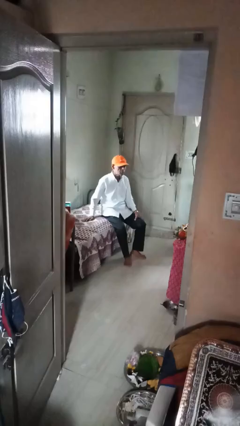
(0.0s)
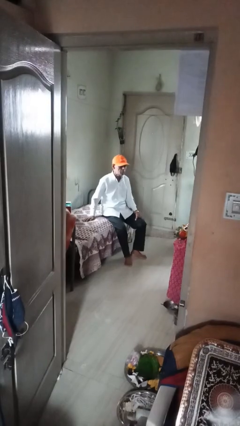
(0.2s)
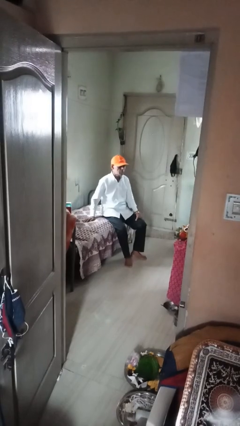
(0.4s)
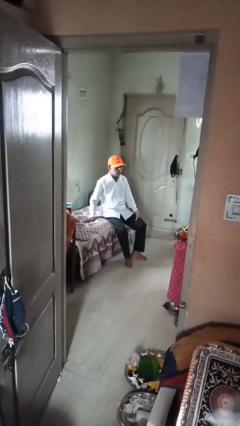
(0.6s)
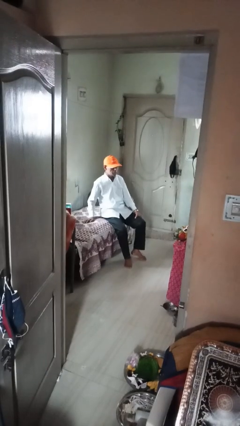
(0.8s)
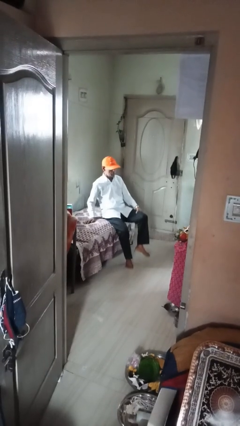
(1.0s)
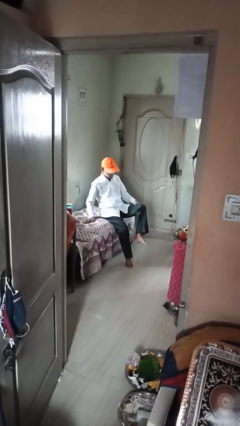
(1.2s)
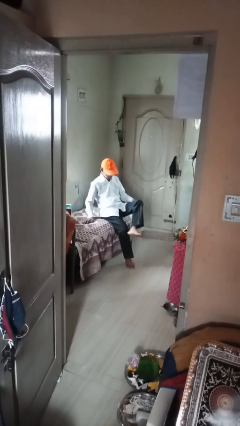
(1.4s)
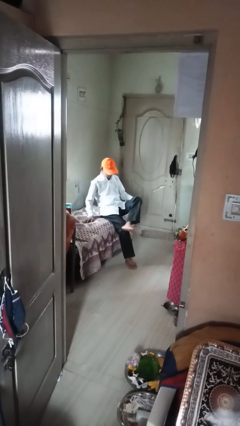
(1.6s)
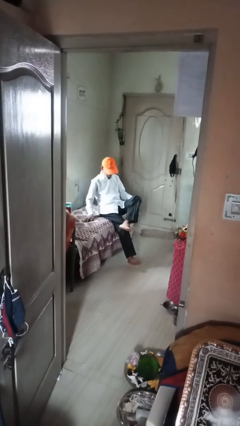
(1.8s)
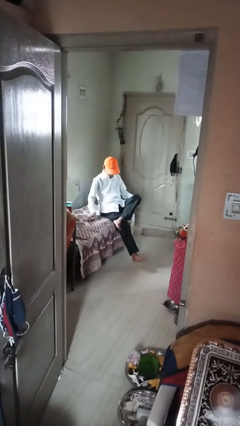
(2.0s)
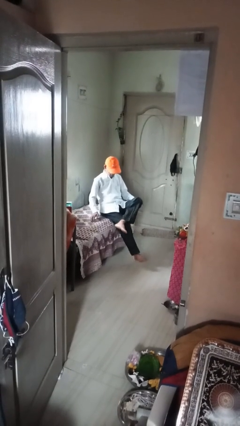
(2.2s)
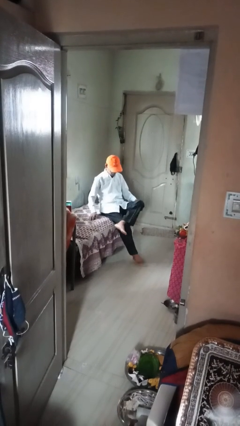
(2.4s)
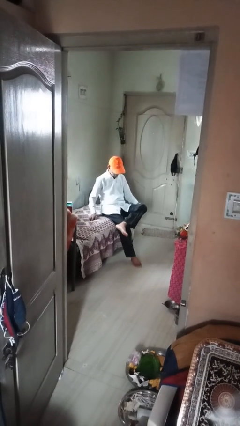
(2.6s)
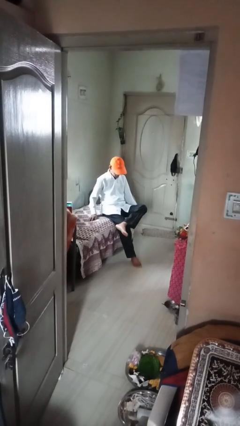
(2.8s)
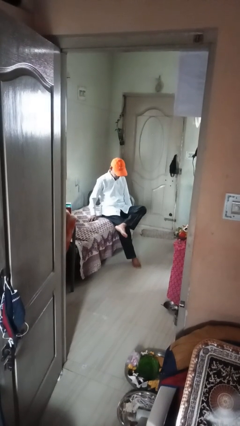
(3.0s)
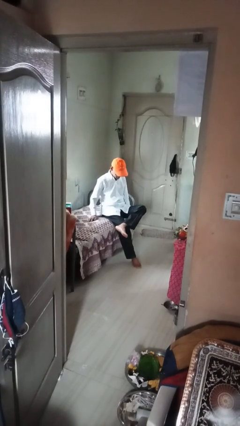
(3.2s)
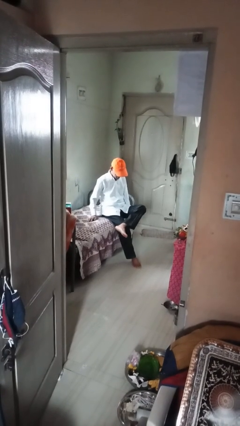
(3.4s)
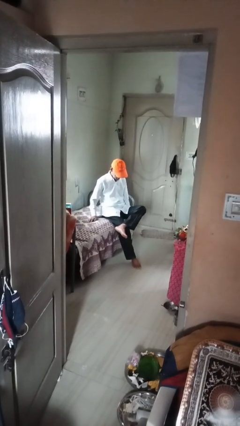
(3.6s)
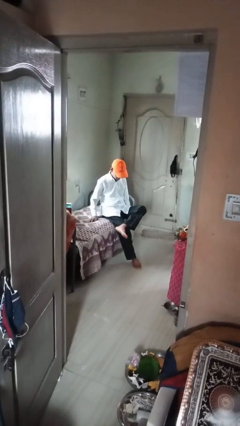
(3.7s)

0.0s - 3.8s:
person crosses legs

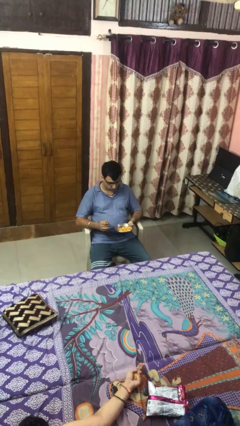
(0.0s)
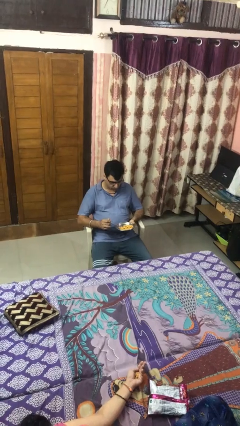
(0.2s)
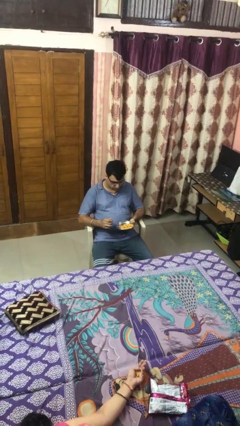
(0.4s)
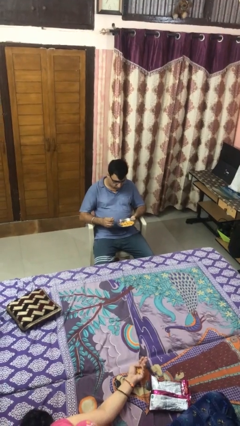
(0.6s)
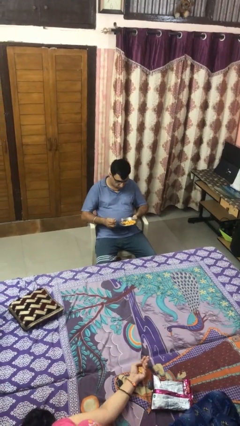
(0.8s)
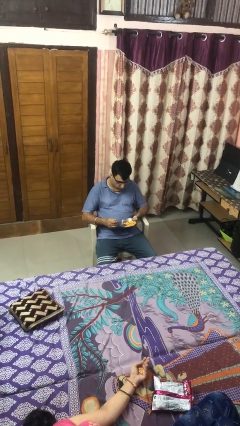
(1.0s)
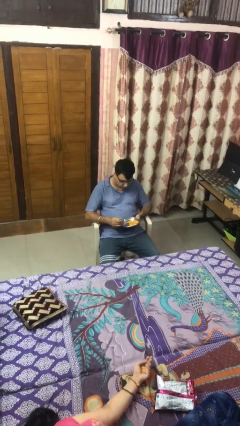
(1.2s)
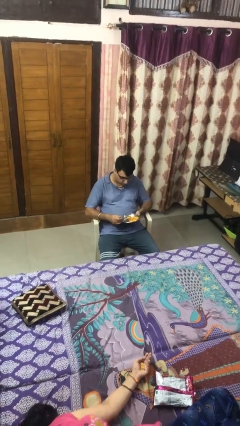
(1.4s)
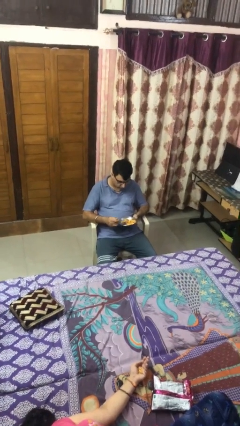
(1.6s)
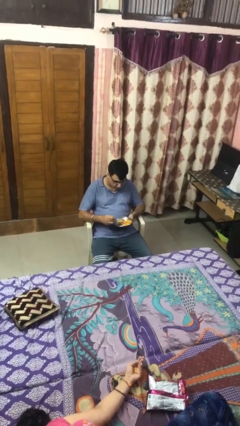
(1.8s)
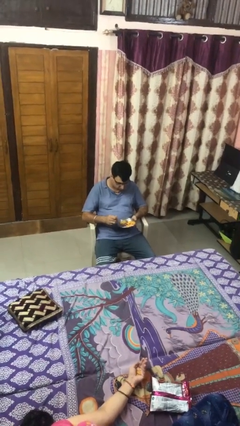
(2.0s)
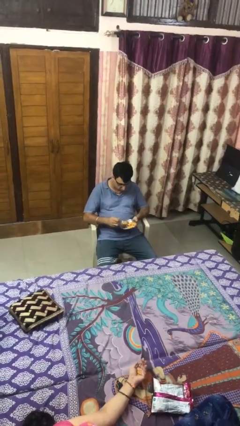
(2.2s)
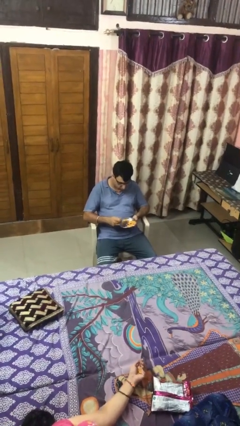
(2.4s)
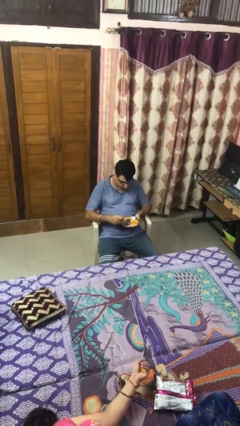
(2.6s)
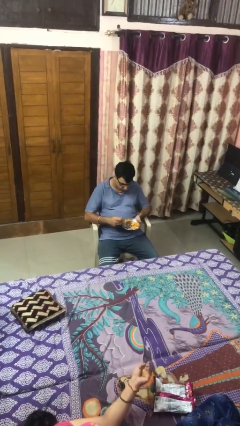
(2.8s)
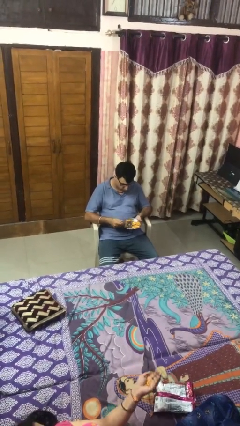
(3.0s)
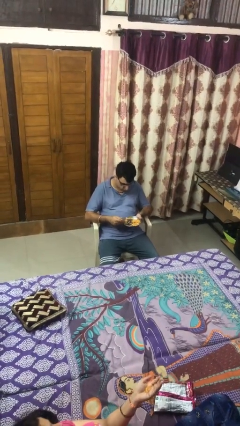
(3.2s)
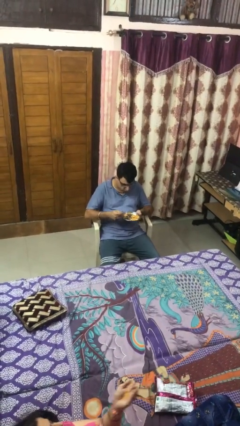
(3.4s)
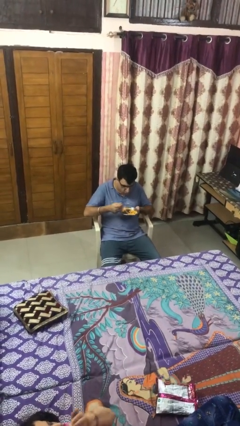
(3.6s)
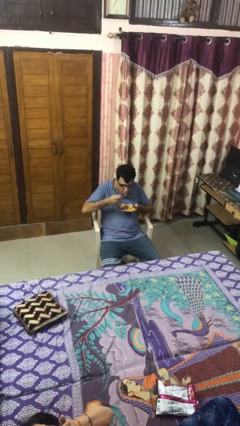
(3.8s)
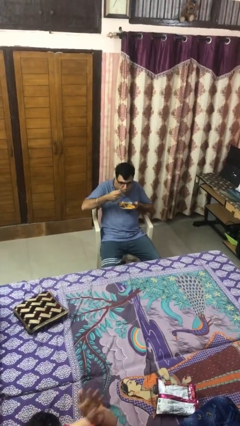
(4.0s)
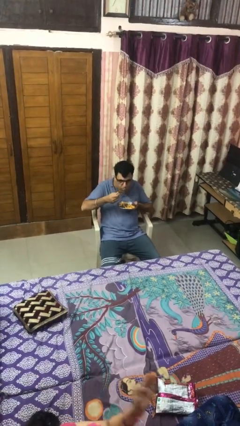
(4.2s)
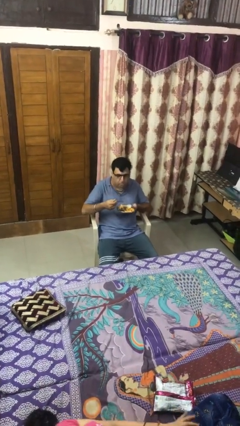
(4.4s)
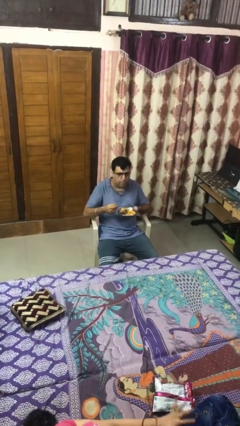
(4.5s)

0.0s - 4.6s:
person eats with utensil

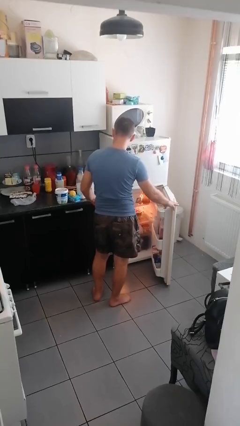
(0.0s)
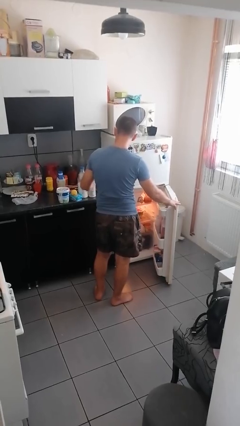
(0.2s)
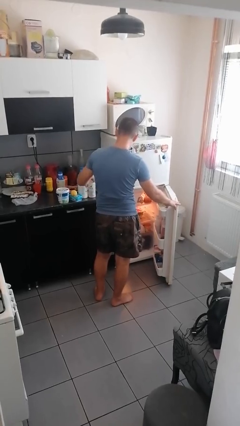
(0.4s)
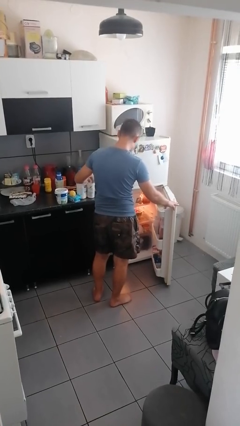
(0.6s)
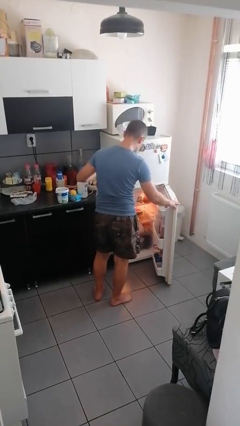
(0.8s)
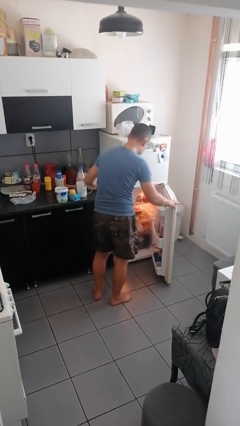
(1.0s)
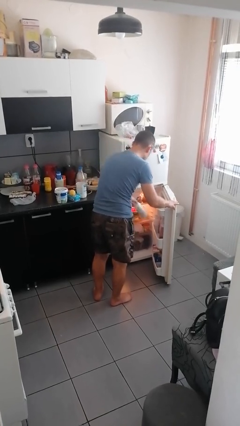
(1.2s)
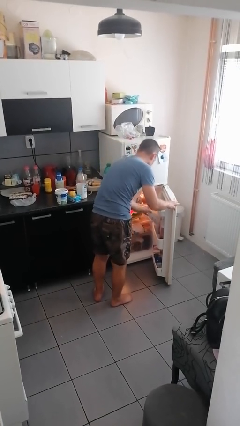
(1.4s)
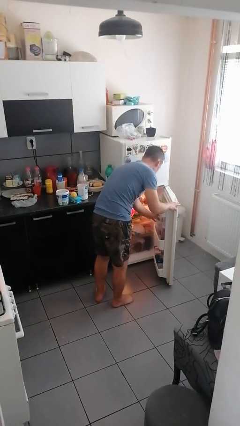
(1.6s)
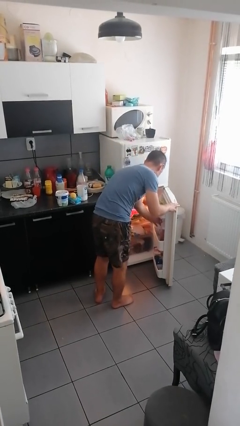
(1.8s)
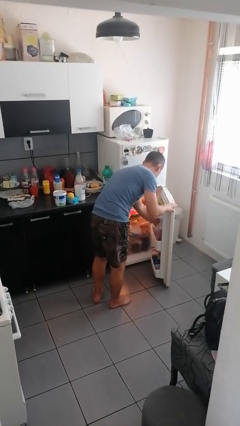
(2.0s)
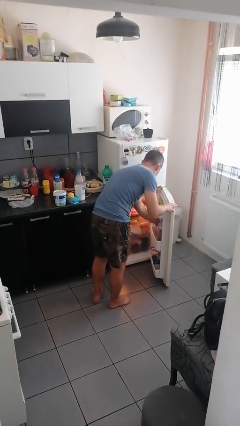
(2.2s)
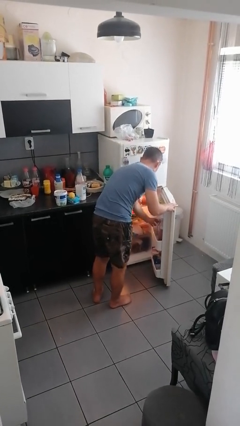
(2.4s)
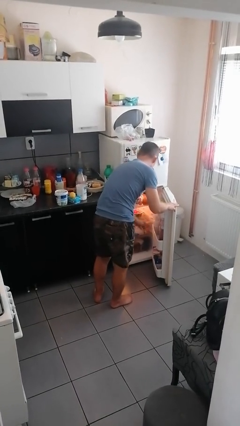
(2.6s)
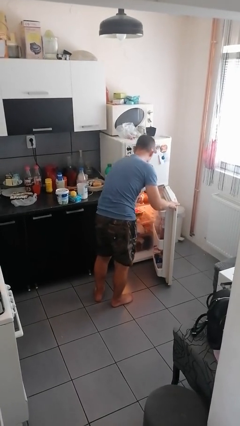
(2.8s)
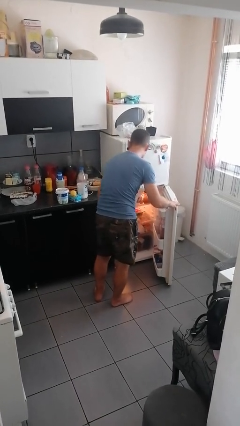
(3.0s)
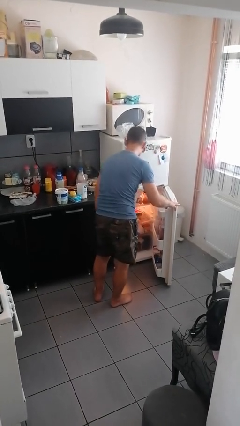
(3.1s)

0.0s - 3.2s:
person loads groceries into refrigerator

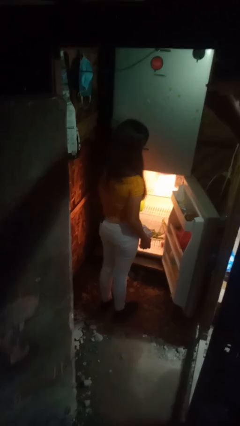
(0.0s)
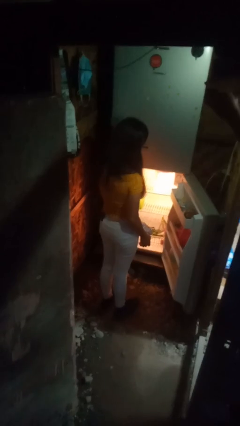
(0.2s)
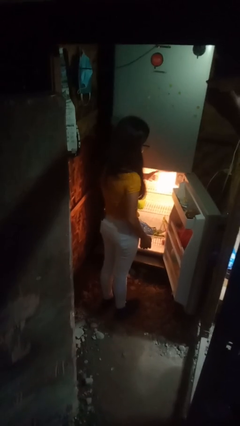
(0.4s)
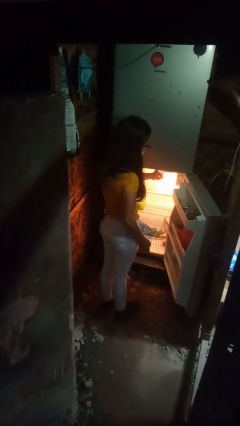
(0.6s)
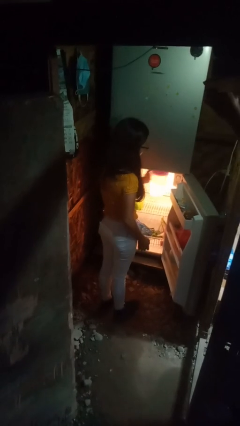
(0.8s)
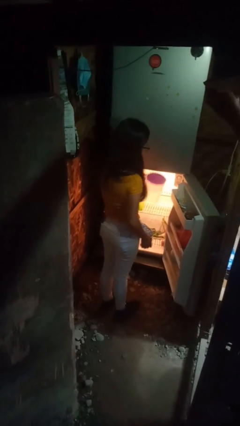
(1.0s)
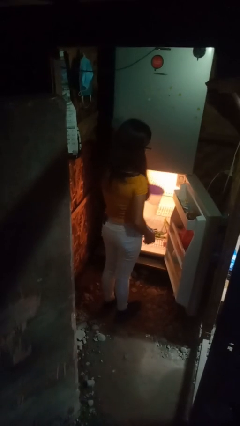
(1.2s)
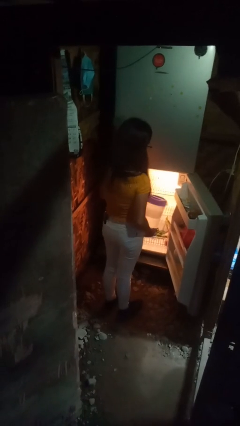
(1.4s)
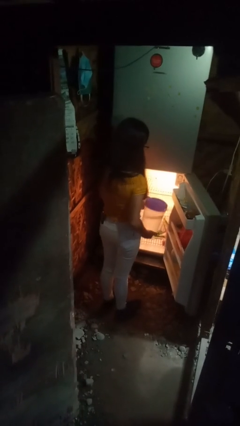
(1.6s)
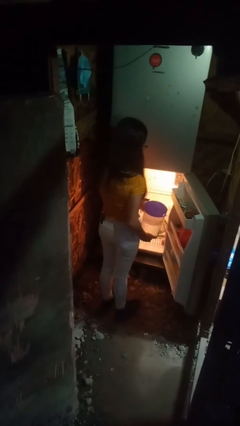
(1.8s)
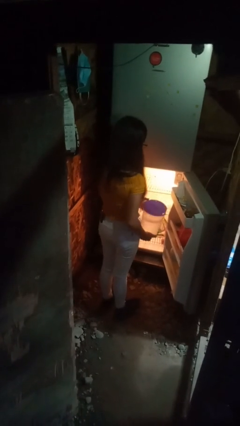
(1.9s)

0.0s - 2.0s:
person takes object from refrigerator

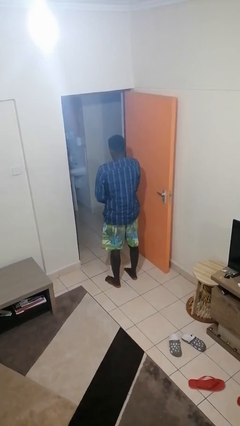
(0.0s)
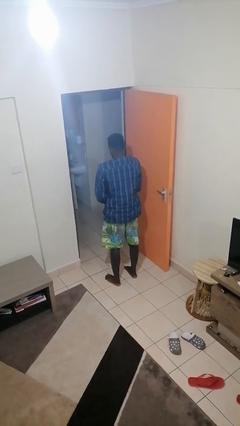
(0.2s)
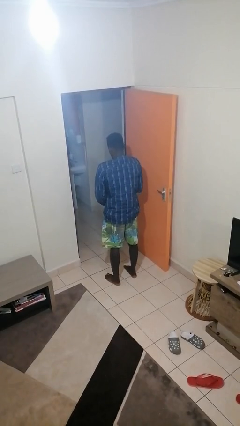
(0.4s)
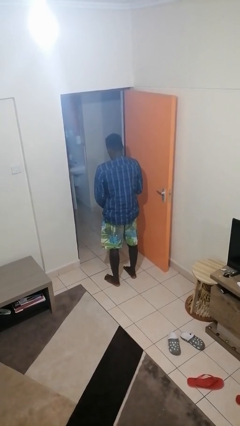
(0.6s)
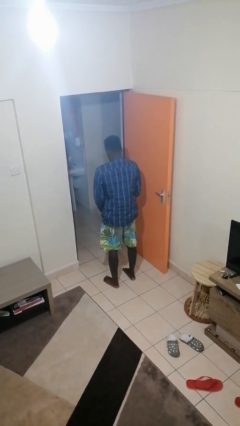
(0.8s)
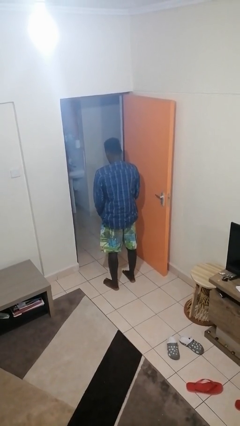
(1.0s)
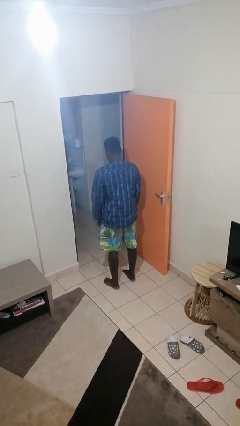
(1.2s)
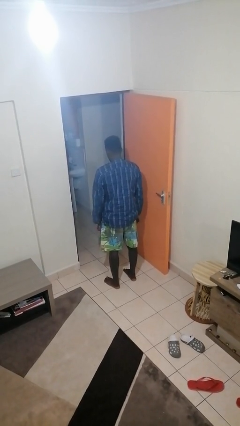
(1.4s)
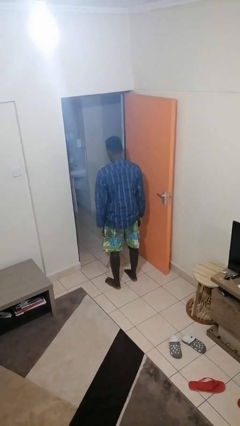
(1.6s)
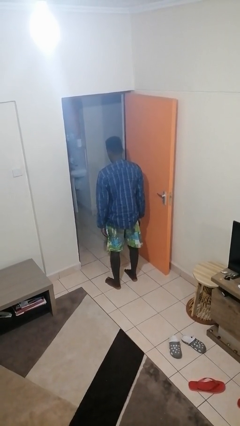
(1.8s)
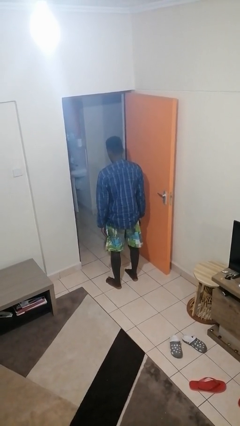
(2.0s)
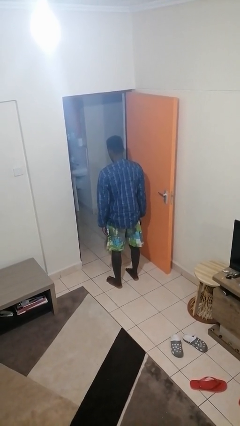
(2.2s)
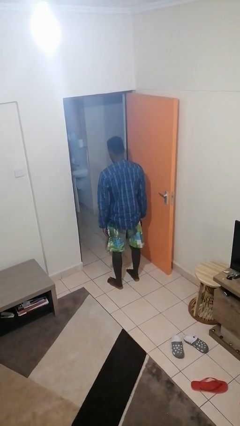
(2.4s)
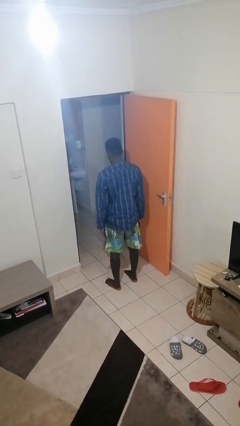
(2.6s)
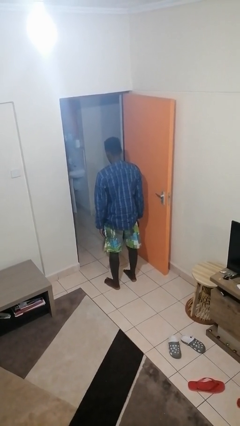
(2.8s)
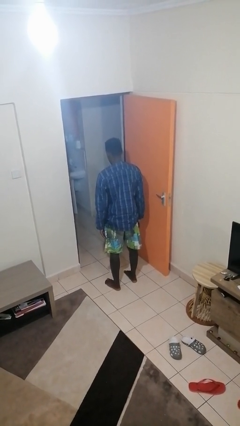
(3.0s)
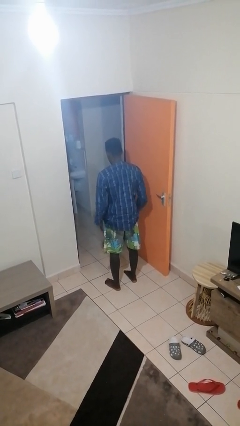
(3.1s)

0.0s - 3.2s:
person unzips jacket

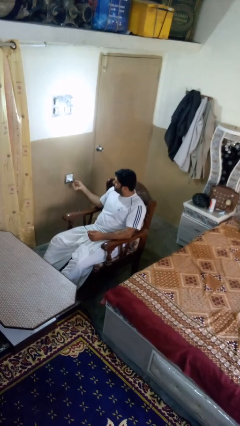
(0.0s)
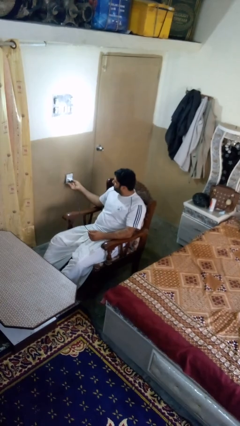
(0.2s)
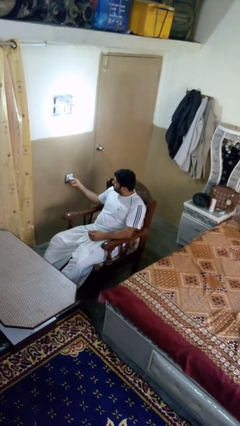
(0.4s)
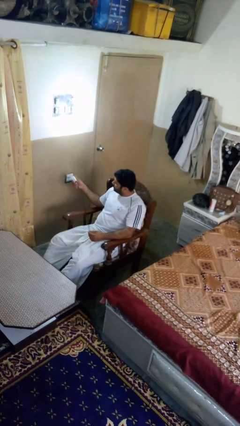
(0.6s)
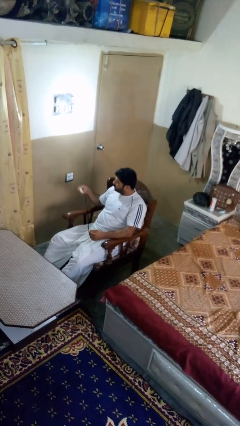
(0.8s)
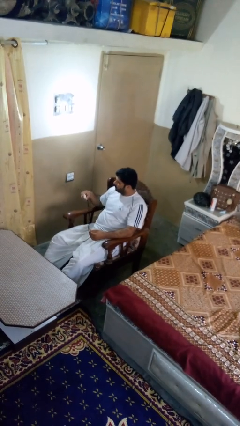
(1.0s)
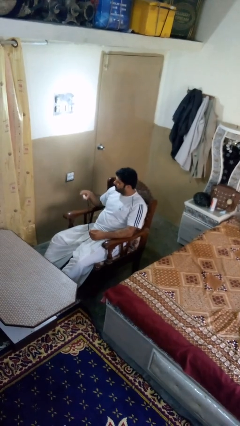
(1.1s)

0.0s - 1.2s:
person unplugs from electrical socket
